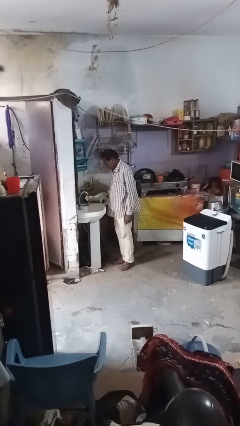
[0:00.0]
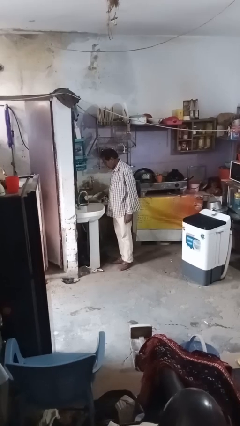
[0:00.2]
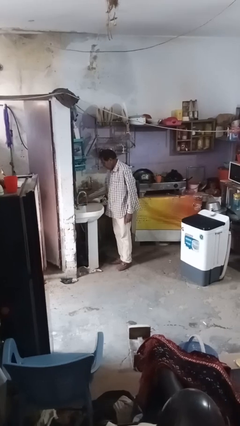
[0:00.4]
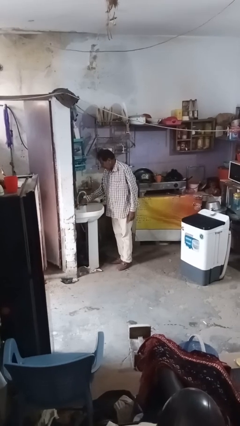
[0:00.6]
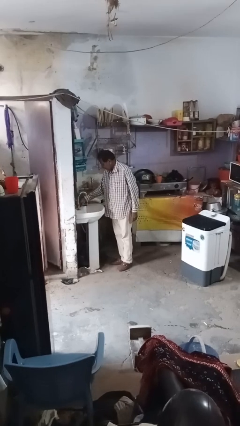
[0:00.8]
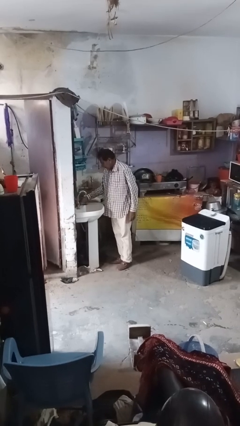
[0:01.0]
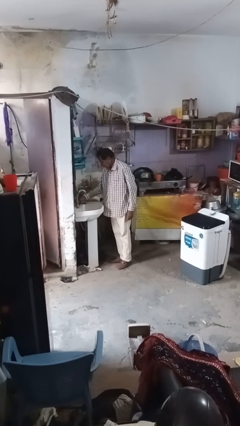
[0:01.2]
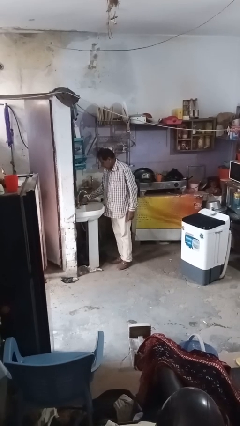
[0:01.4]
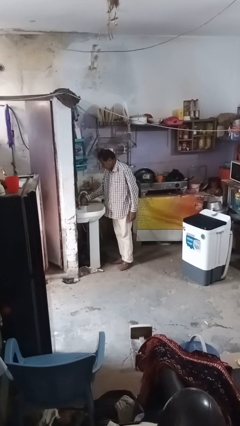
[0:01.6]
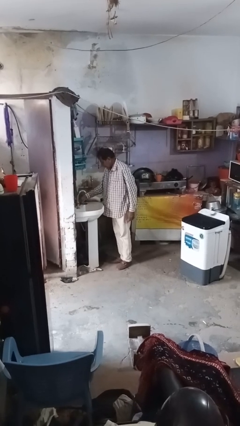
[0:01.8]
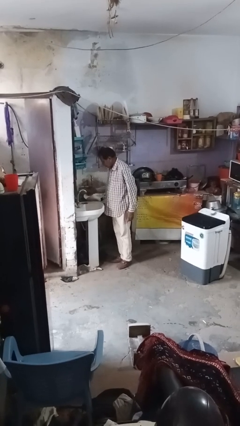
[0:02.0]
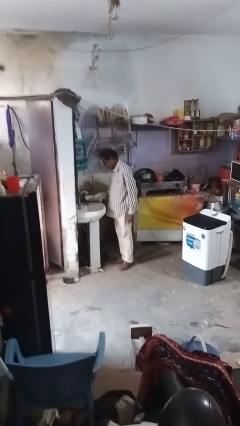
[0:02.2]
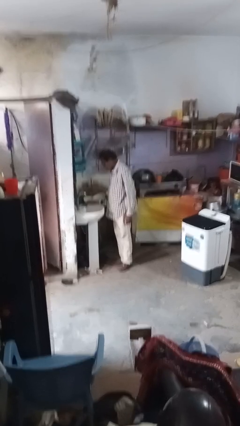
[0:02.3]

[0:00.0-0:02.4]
person turns off faucet

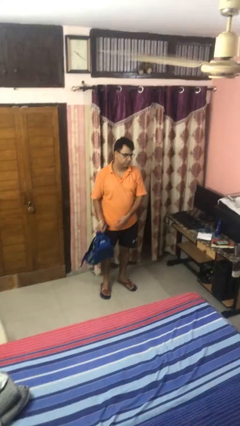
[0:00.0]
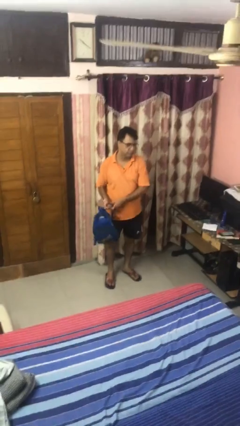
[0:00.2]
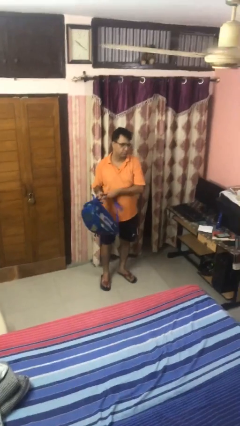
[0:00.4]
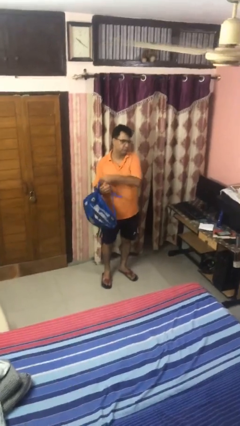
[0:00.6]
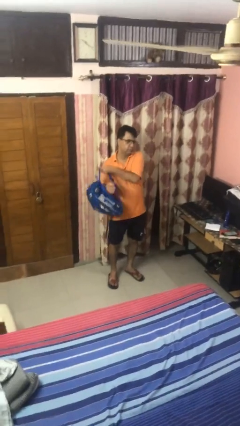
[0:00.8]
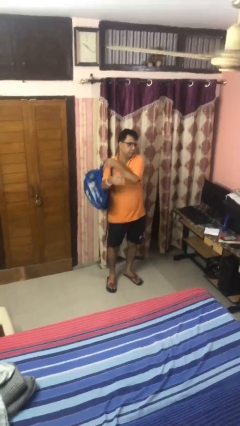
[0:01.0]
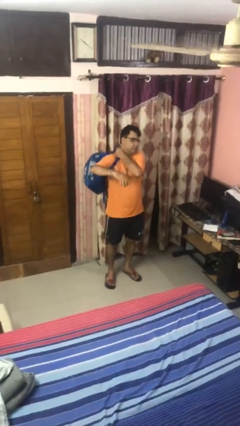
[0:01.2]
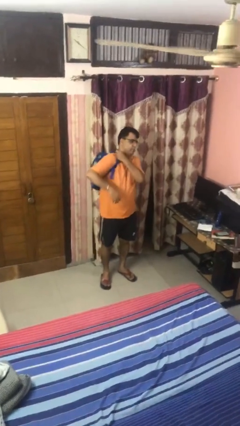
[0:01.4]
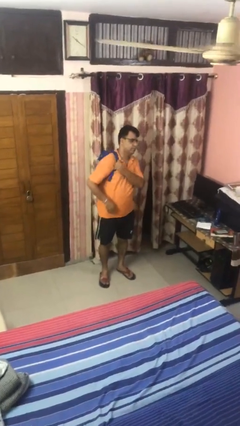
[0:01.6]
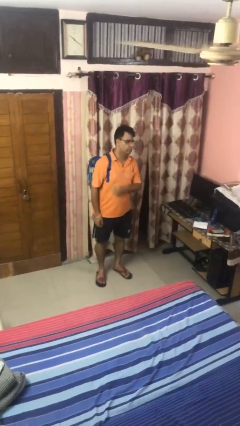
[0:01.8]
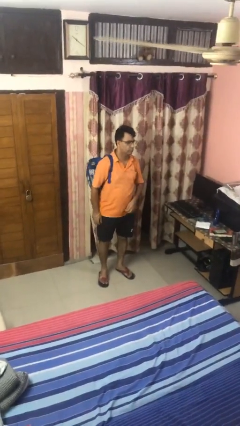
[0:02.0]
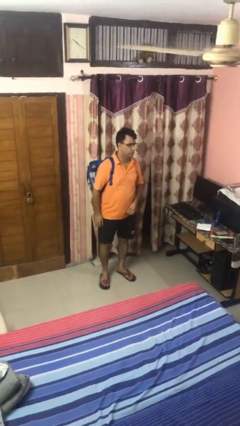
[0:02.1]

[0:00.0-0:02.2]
person puts on backpack

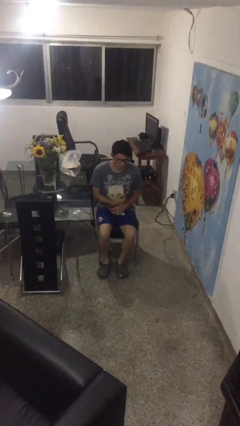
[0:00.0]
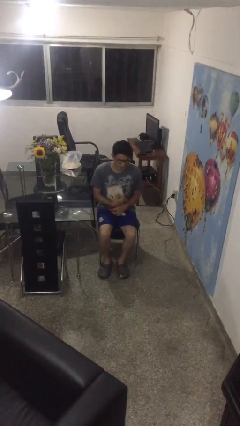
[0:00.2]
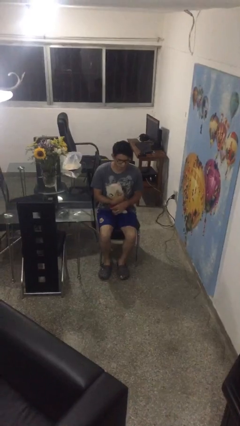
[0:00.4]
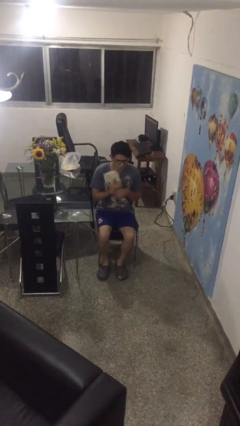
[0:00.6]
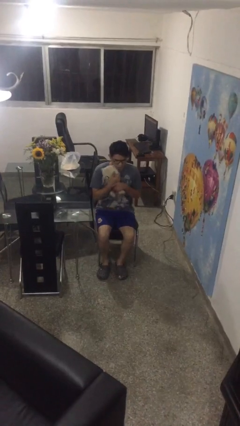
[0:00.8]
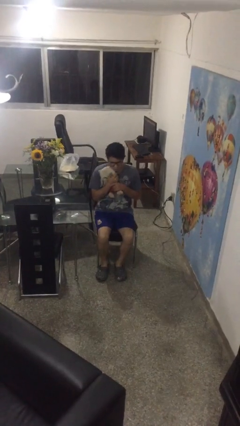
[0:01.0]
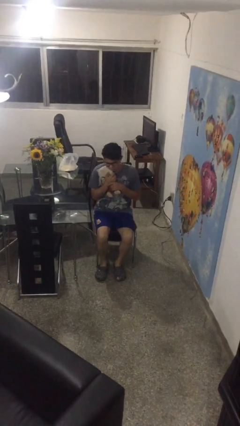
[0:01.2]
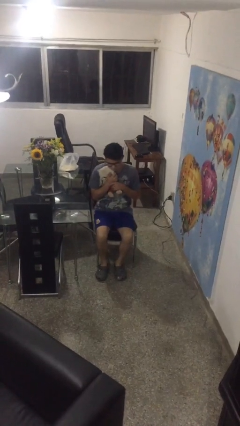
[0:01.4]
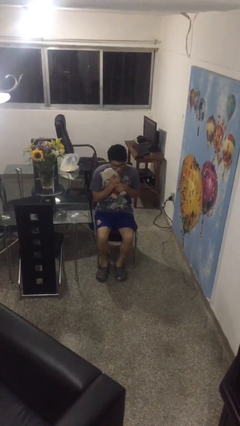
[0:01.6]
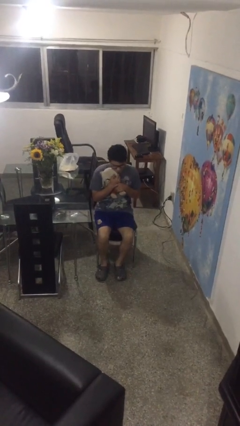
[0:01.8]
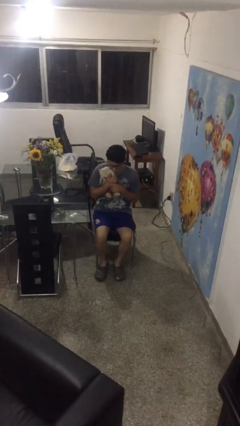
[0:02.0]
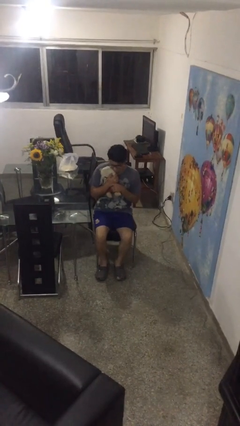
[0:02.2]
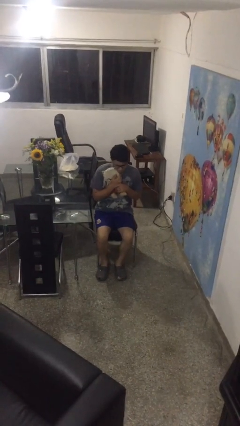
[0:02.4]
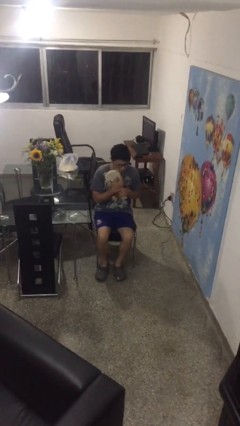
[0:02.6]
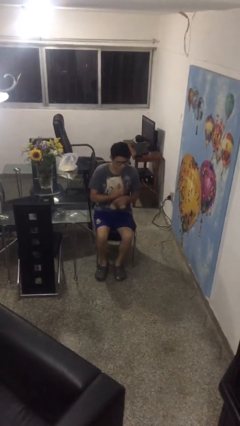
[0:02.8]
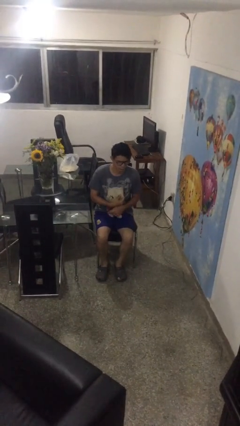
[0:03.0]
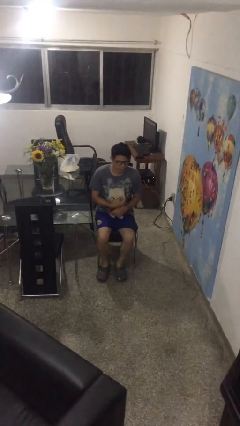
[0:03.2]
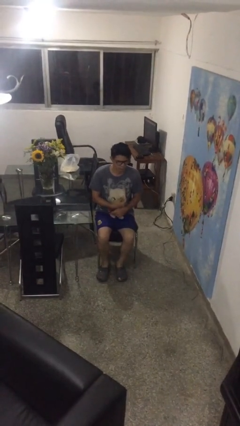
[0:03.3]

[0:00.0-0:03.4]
person hugs stuffed animal

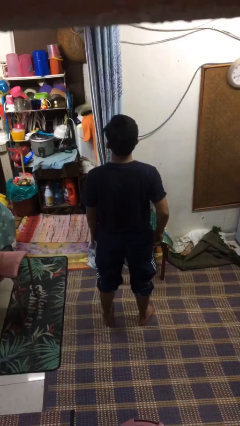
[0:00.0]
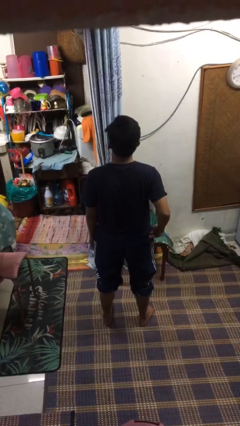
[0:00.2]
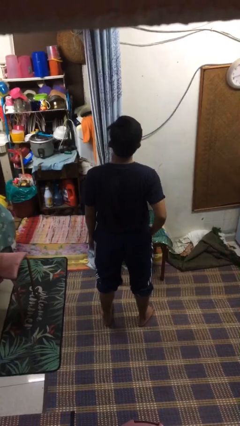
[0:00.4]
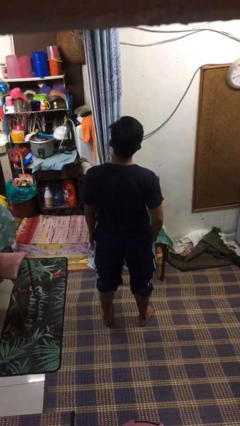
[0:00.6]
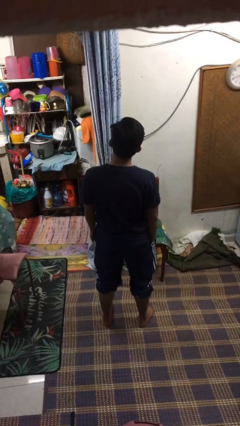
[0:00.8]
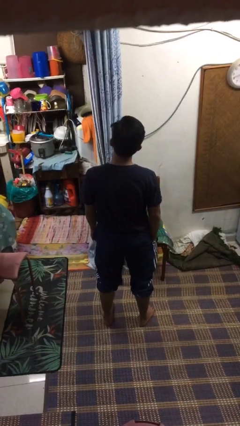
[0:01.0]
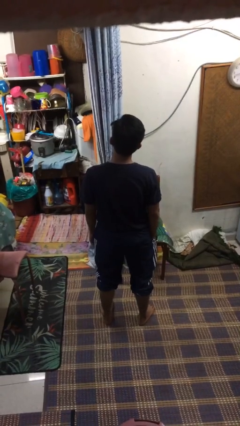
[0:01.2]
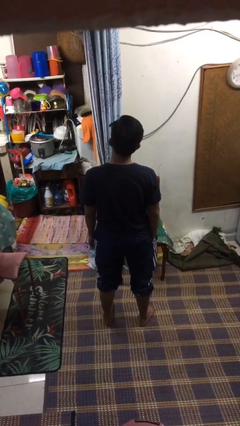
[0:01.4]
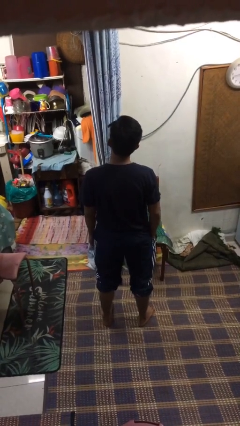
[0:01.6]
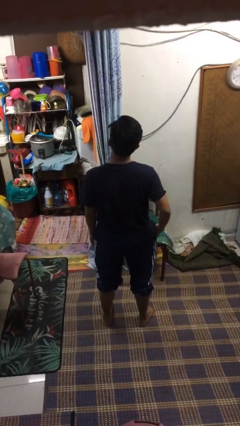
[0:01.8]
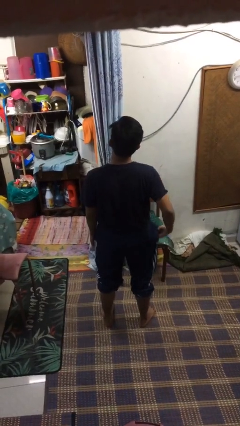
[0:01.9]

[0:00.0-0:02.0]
person puts hands in back pockets

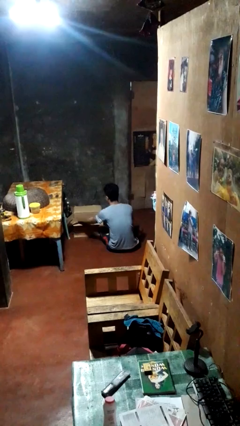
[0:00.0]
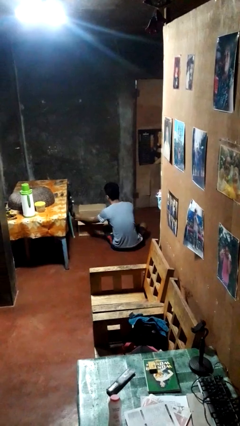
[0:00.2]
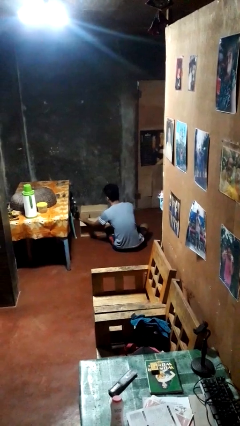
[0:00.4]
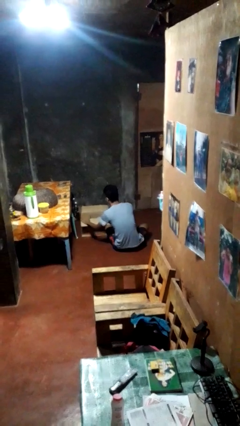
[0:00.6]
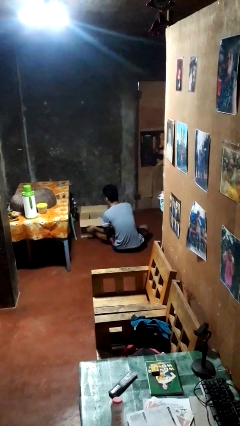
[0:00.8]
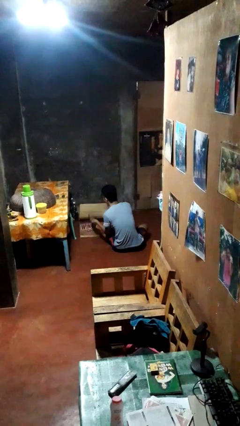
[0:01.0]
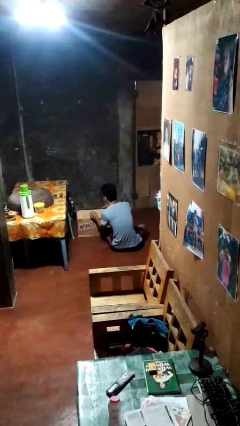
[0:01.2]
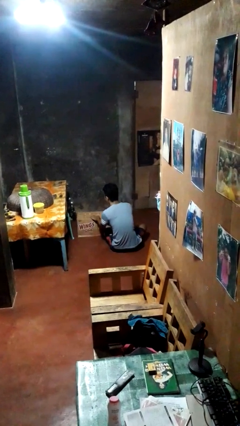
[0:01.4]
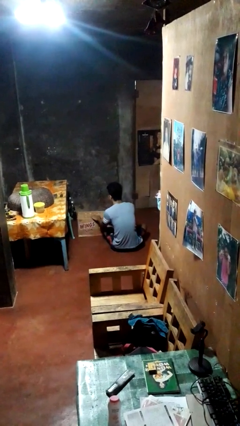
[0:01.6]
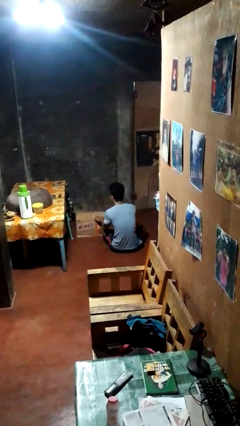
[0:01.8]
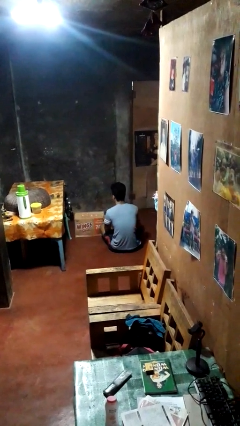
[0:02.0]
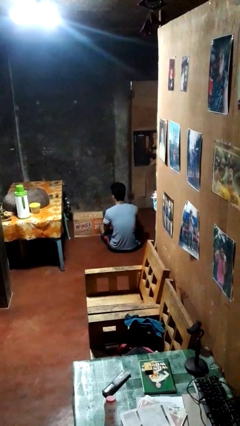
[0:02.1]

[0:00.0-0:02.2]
person closes box

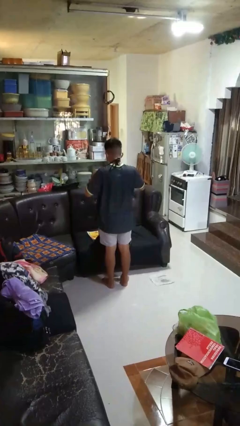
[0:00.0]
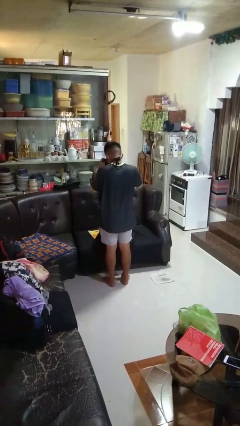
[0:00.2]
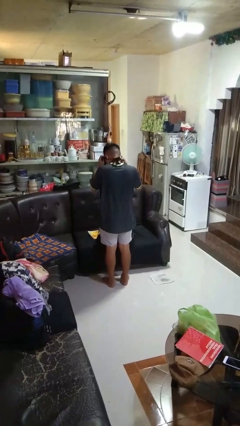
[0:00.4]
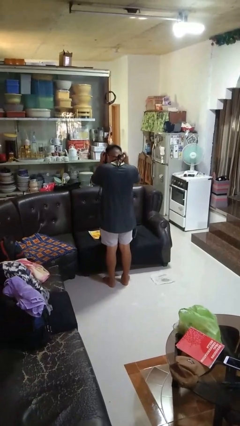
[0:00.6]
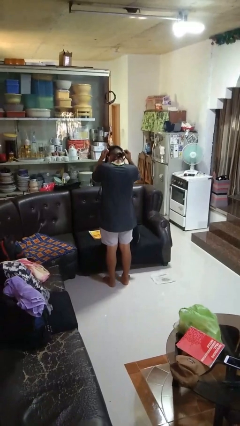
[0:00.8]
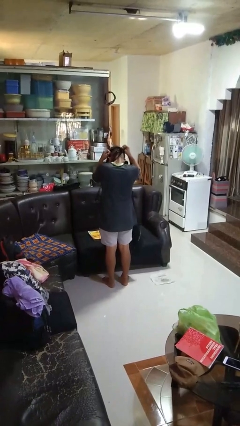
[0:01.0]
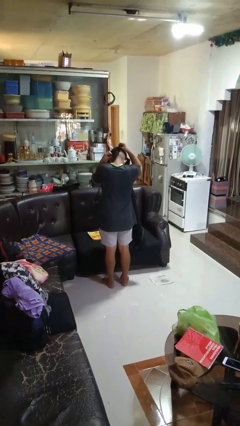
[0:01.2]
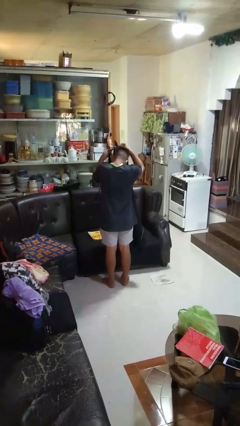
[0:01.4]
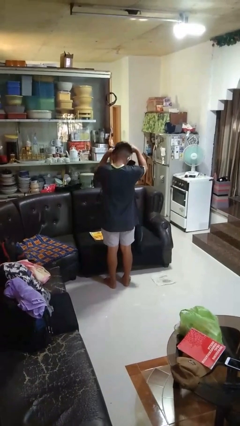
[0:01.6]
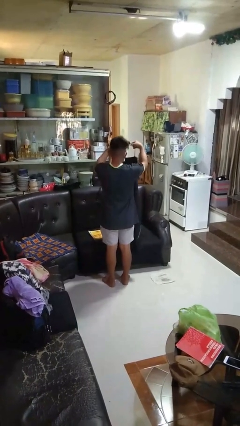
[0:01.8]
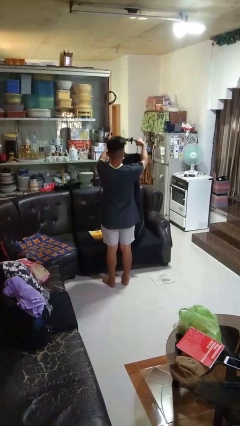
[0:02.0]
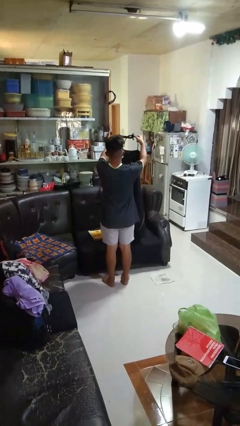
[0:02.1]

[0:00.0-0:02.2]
person takes off apron

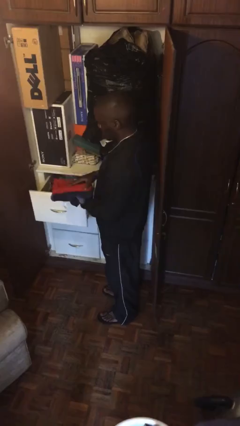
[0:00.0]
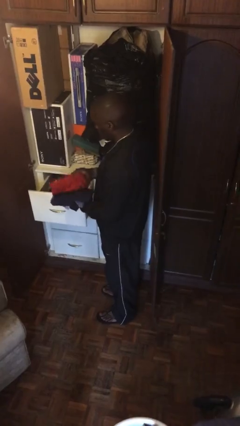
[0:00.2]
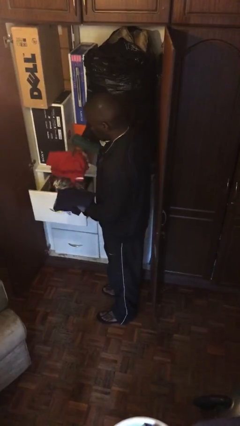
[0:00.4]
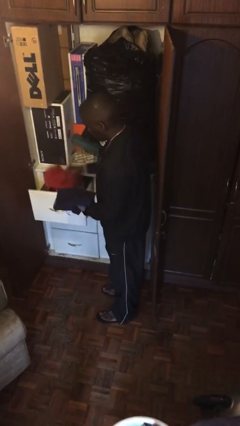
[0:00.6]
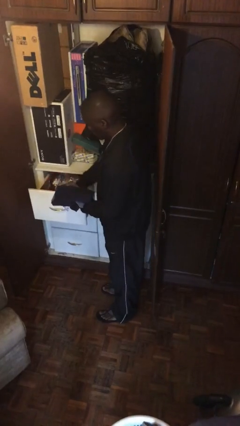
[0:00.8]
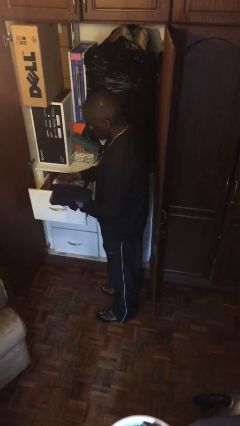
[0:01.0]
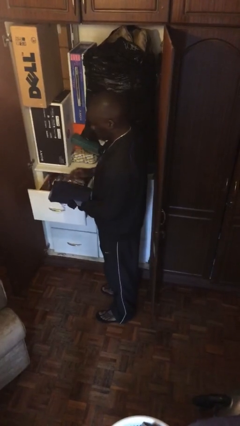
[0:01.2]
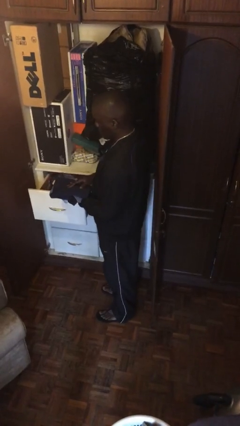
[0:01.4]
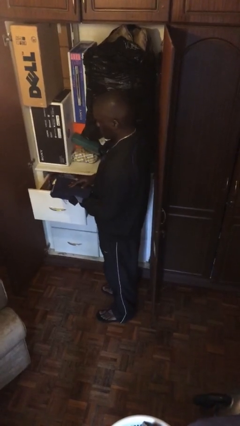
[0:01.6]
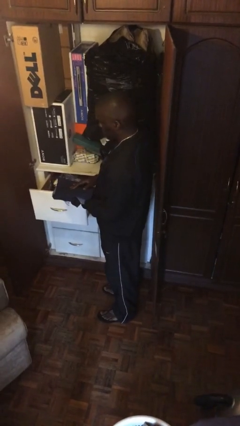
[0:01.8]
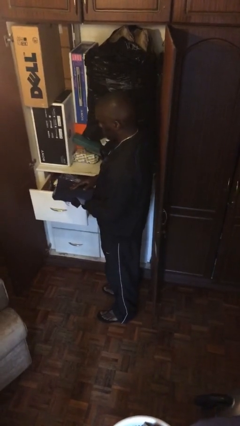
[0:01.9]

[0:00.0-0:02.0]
person puts clothes into dresser

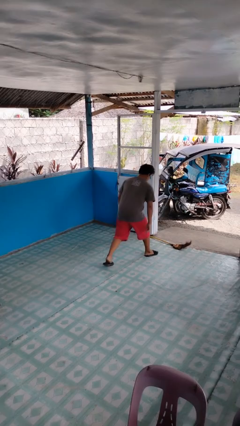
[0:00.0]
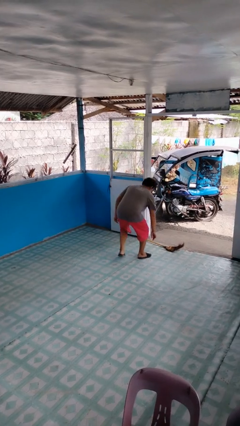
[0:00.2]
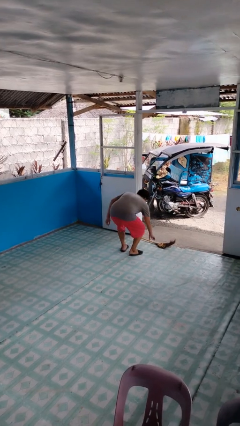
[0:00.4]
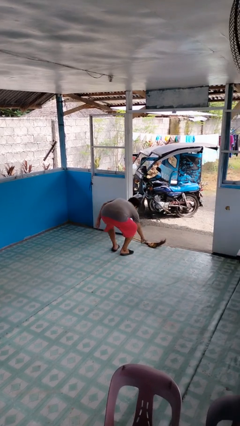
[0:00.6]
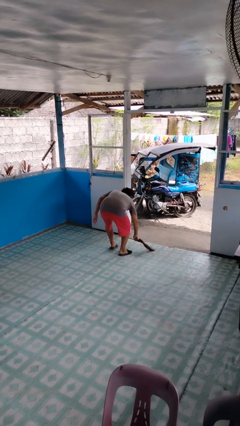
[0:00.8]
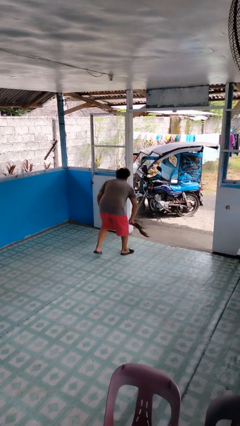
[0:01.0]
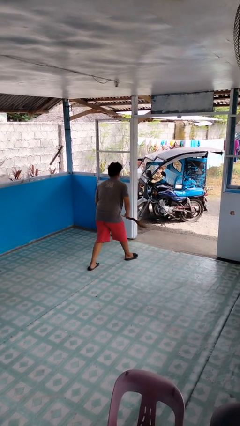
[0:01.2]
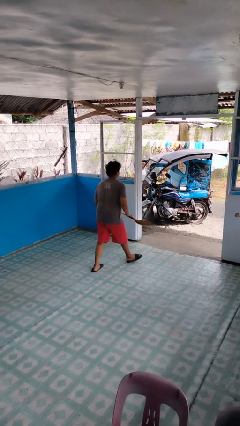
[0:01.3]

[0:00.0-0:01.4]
person picks up object from floor
